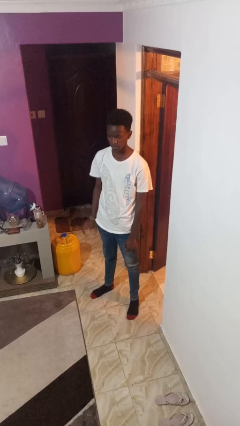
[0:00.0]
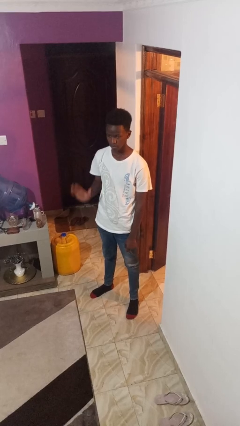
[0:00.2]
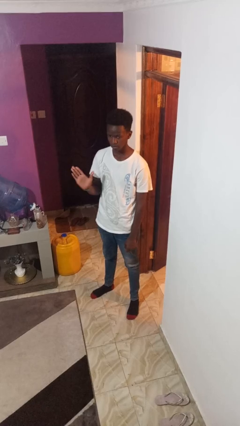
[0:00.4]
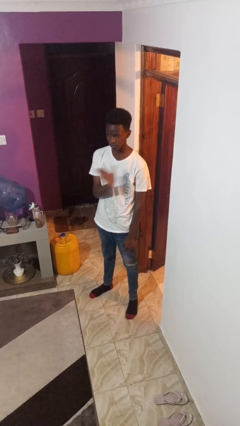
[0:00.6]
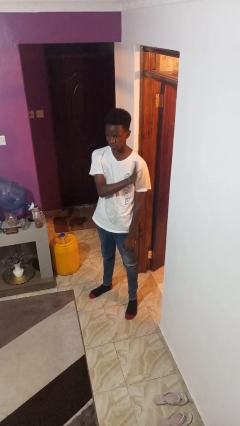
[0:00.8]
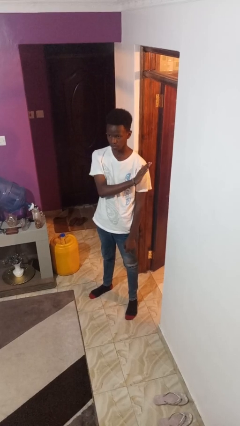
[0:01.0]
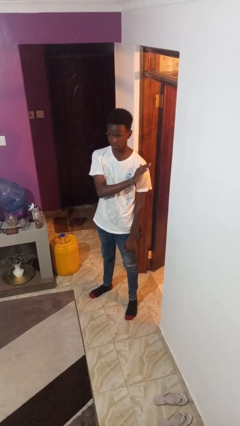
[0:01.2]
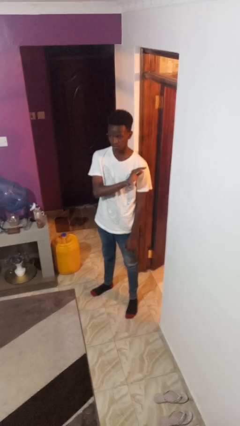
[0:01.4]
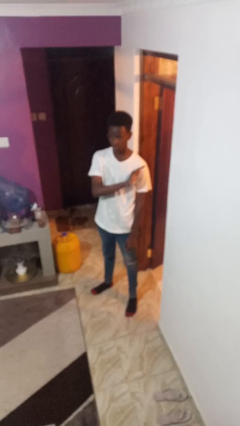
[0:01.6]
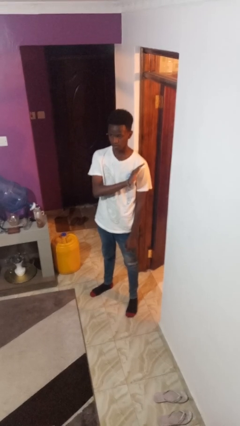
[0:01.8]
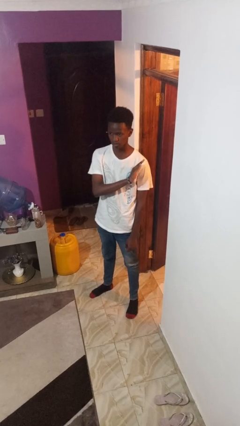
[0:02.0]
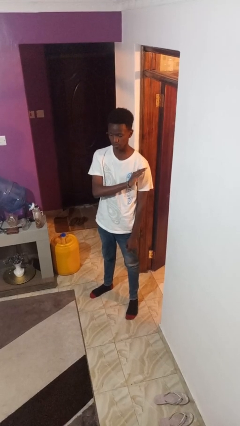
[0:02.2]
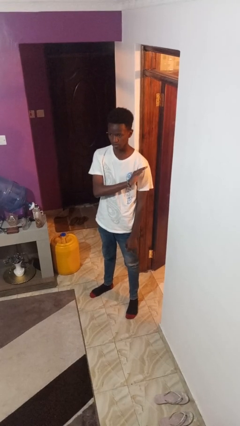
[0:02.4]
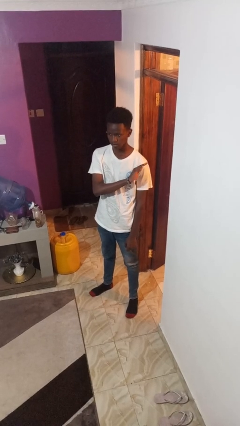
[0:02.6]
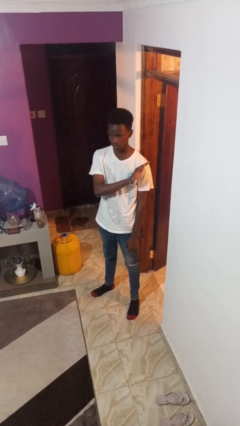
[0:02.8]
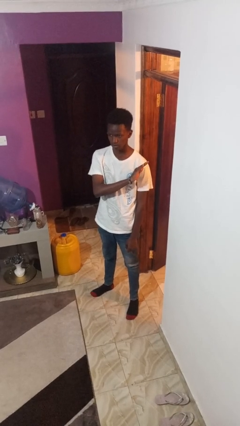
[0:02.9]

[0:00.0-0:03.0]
person gestures swipe left

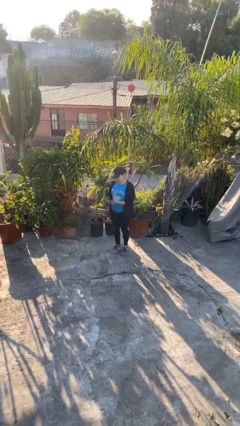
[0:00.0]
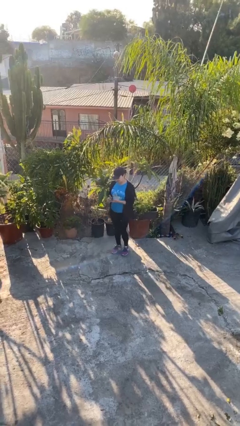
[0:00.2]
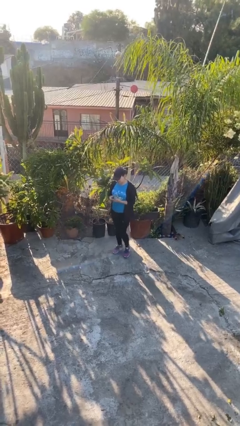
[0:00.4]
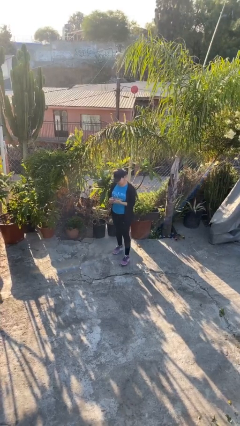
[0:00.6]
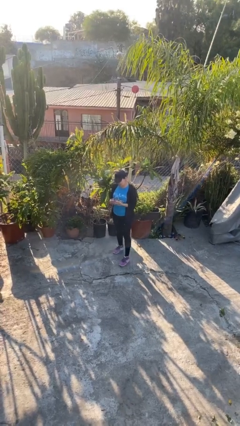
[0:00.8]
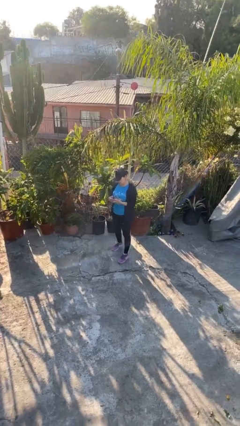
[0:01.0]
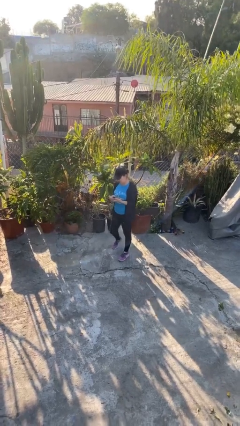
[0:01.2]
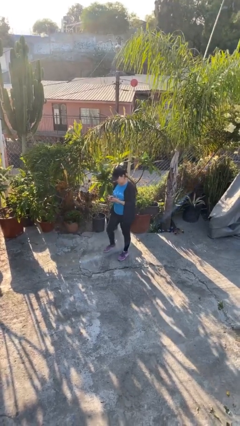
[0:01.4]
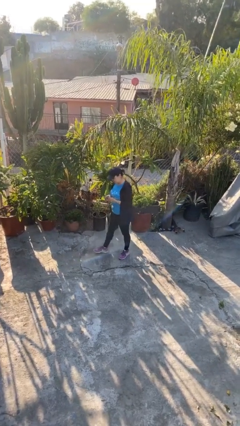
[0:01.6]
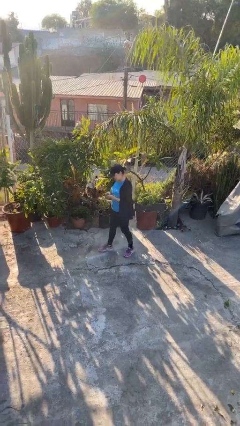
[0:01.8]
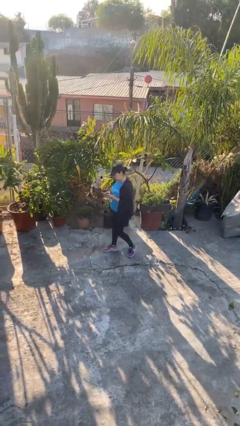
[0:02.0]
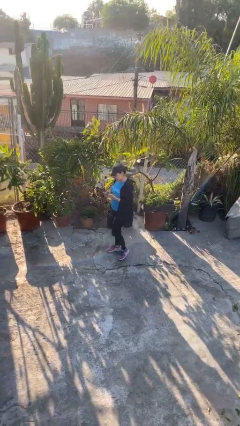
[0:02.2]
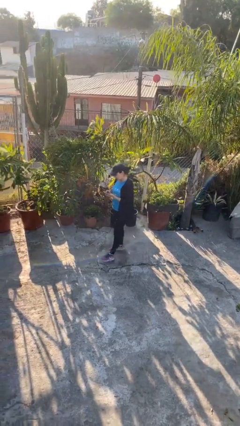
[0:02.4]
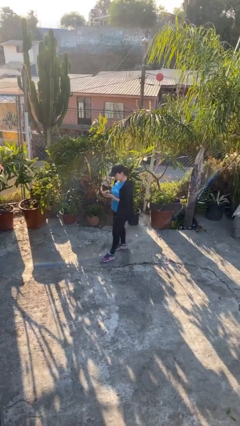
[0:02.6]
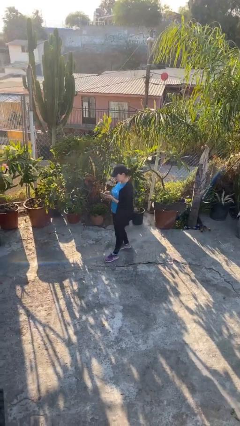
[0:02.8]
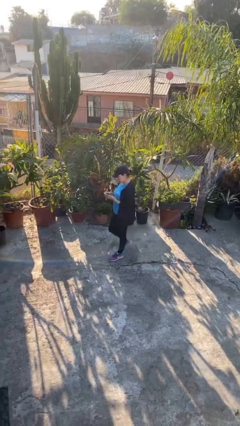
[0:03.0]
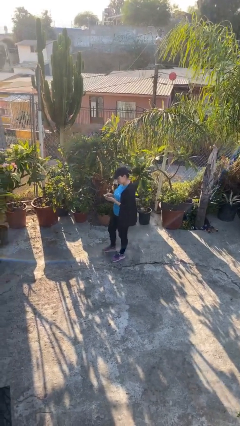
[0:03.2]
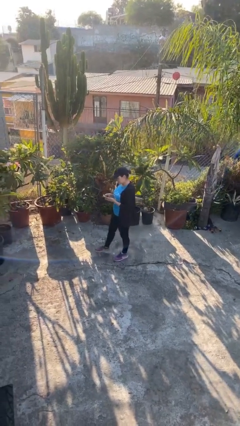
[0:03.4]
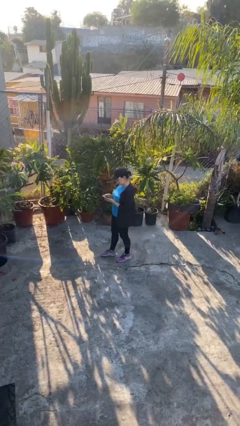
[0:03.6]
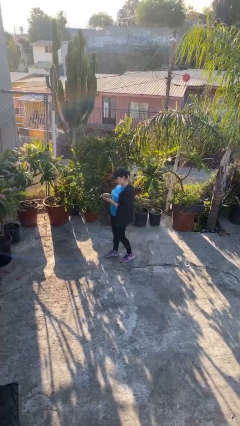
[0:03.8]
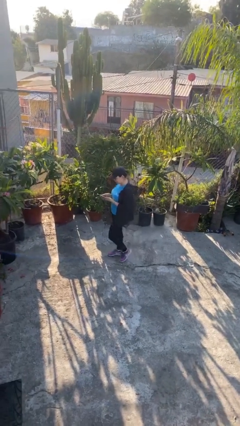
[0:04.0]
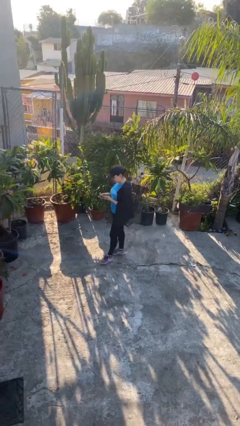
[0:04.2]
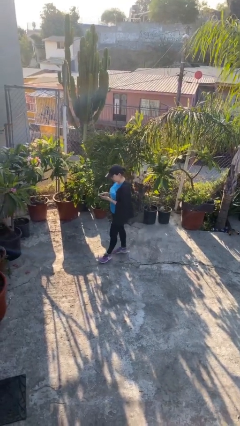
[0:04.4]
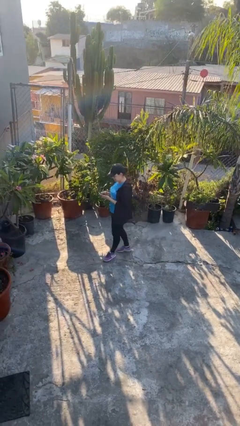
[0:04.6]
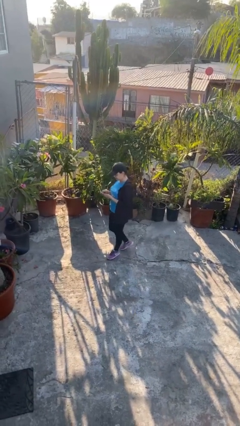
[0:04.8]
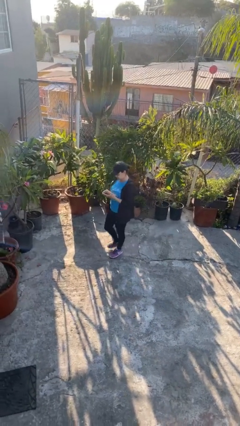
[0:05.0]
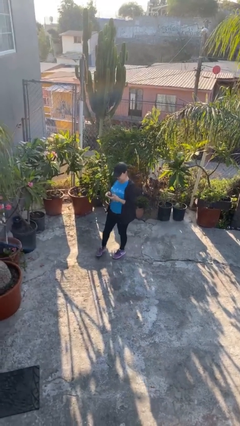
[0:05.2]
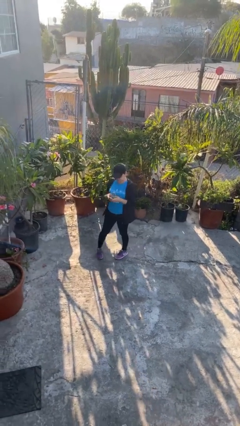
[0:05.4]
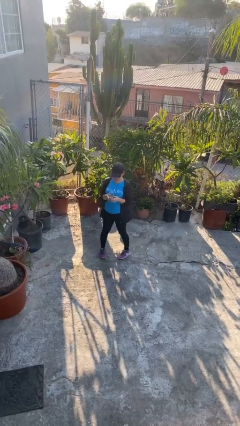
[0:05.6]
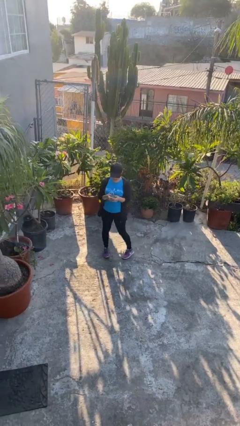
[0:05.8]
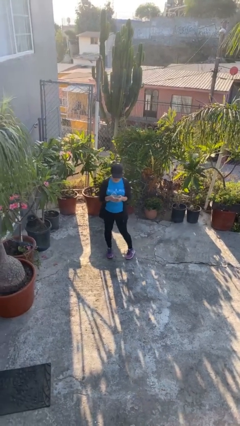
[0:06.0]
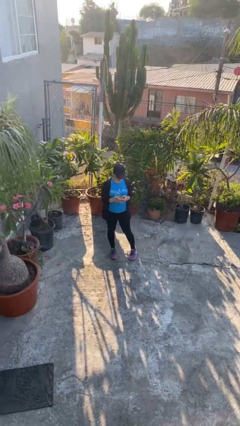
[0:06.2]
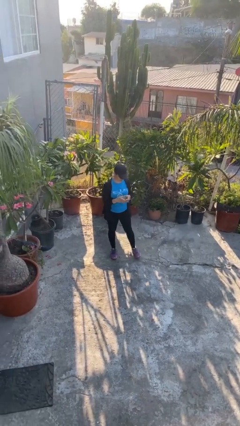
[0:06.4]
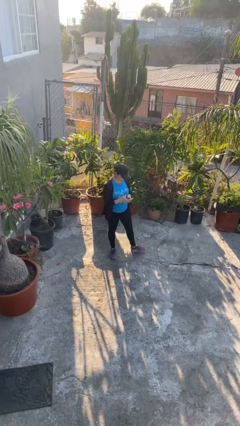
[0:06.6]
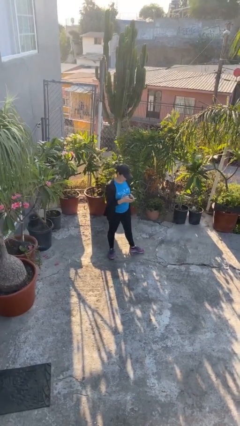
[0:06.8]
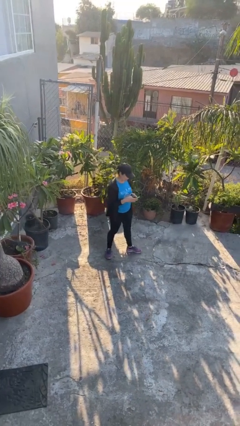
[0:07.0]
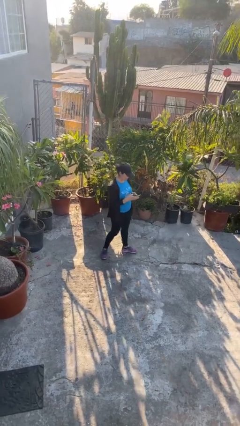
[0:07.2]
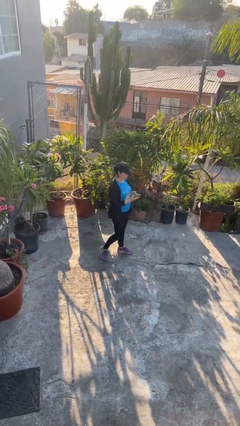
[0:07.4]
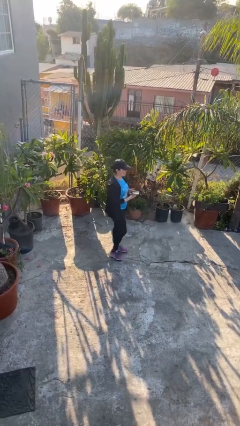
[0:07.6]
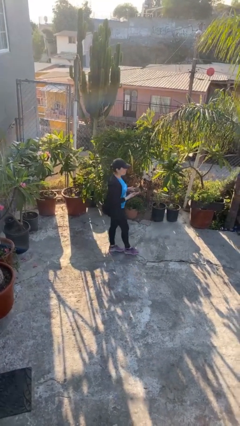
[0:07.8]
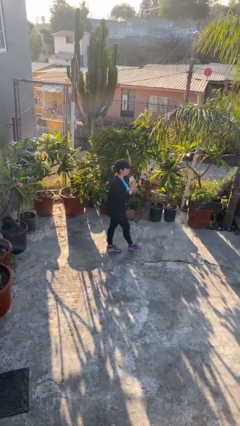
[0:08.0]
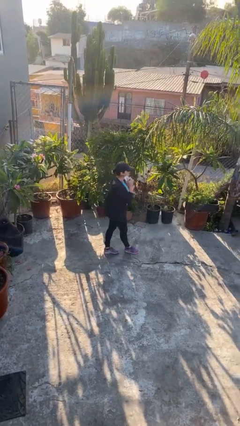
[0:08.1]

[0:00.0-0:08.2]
person texts on phone

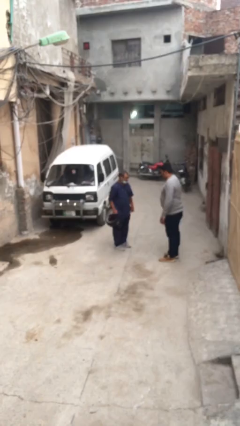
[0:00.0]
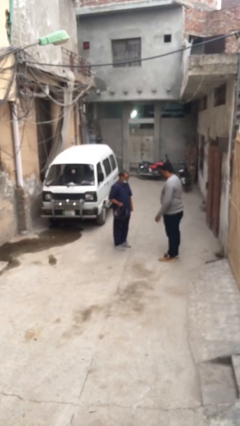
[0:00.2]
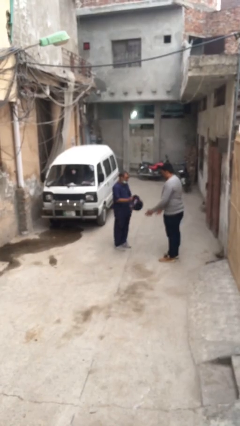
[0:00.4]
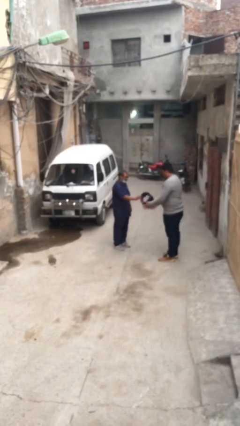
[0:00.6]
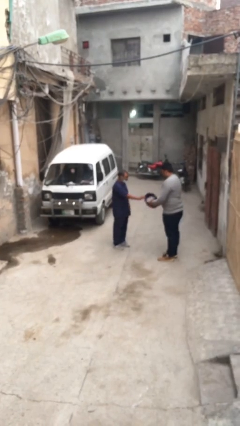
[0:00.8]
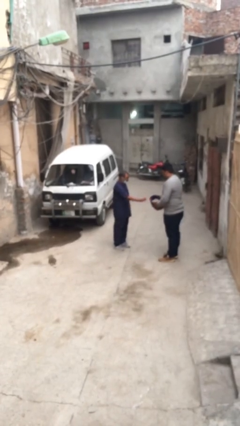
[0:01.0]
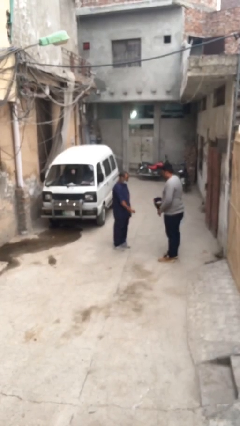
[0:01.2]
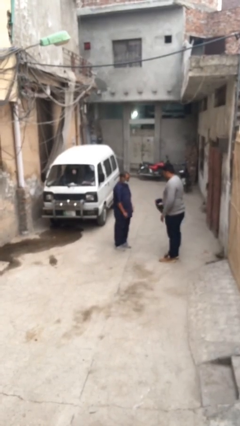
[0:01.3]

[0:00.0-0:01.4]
person transfers object to person

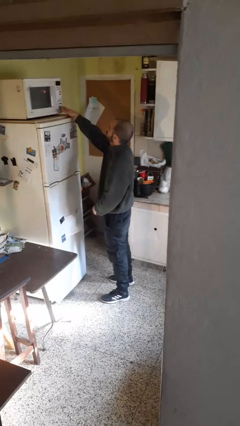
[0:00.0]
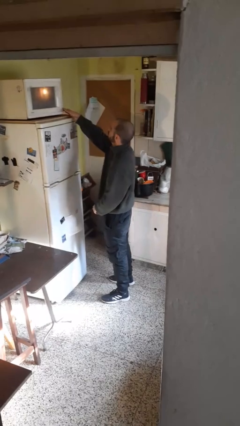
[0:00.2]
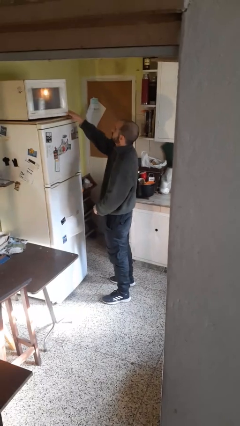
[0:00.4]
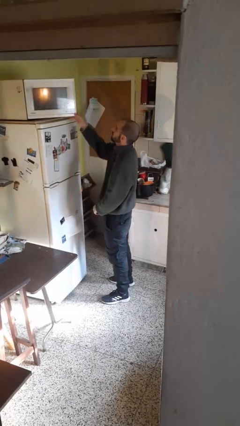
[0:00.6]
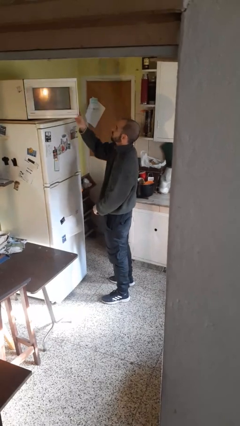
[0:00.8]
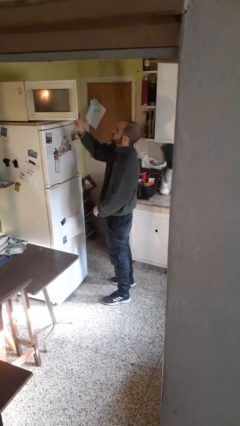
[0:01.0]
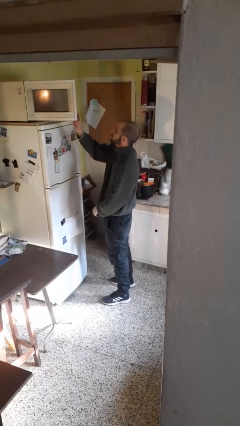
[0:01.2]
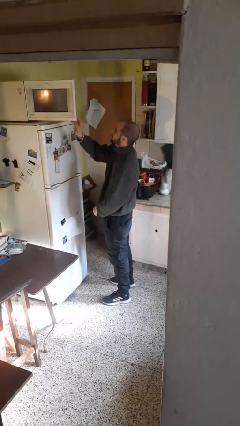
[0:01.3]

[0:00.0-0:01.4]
person opens microwave

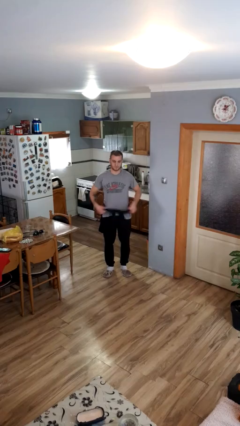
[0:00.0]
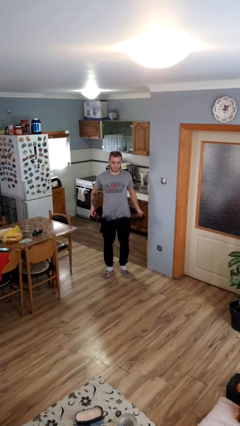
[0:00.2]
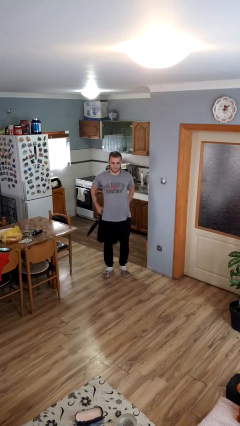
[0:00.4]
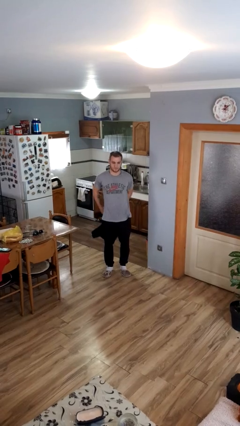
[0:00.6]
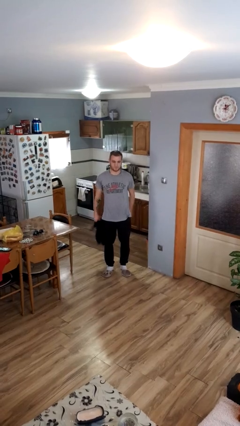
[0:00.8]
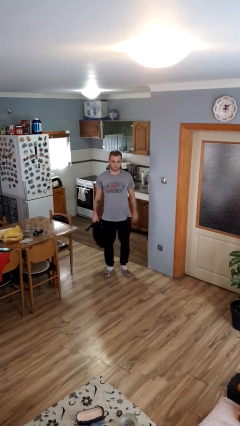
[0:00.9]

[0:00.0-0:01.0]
person unties jacket around waist

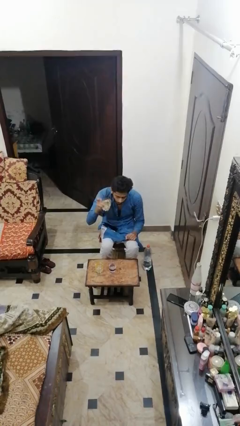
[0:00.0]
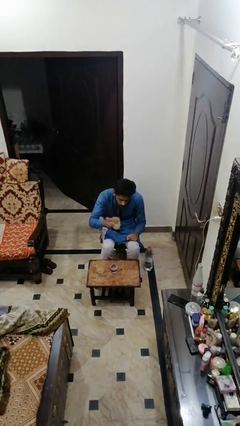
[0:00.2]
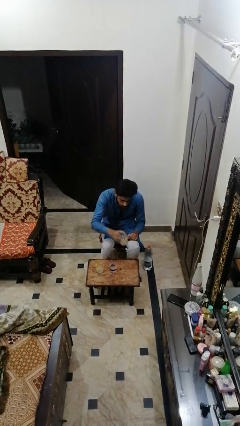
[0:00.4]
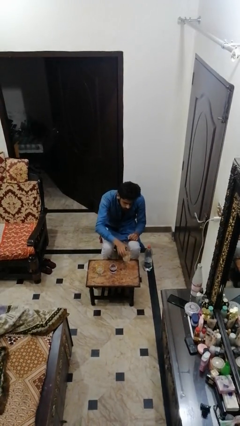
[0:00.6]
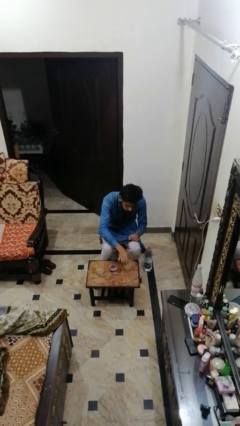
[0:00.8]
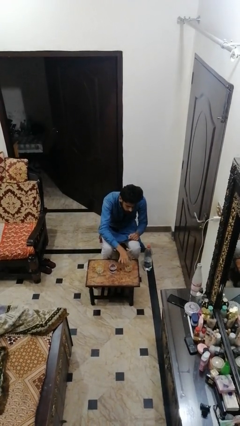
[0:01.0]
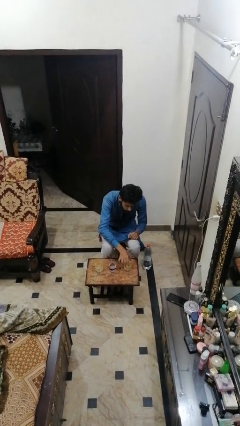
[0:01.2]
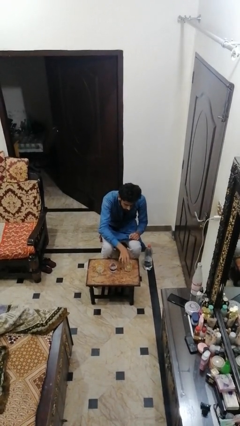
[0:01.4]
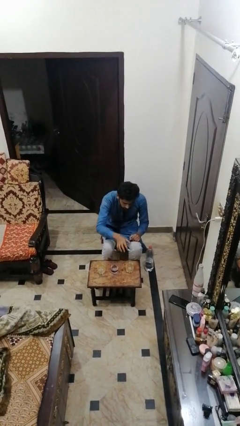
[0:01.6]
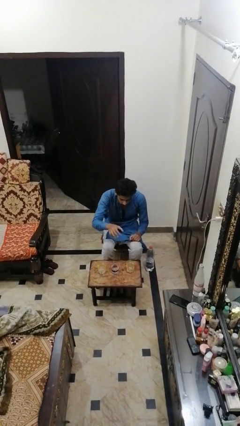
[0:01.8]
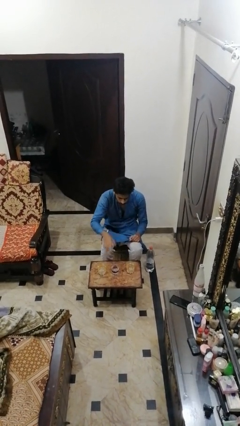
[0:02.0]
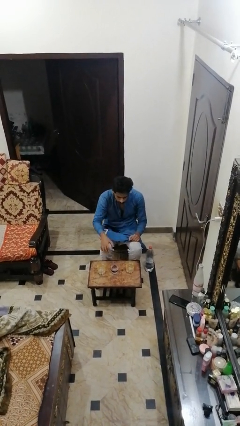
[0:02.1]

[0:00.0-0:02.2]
person puts down object on table
